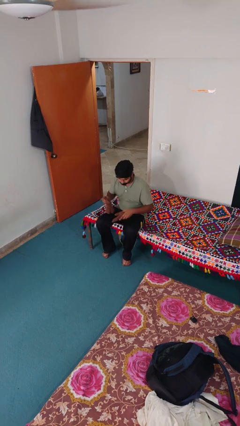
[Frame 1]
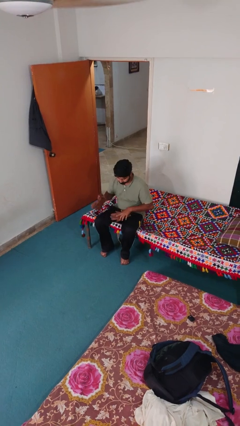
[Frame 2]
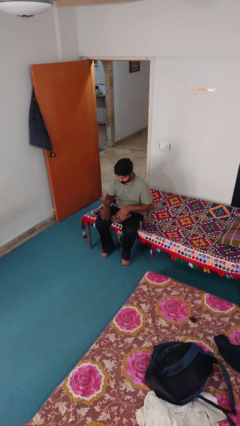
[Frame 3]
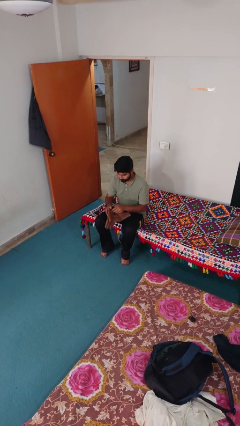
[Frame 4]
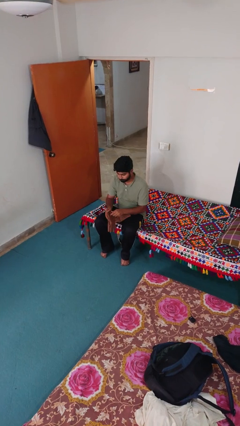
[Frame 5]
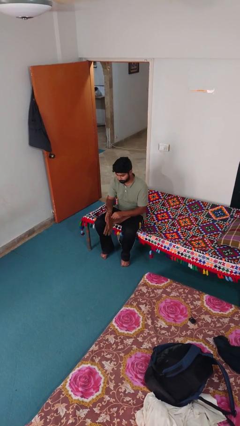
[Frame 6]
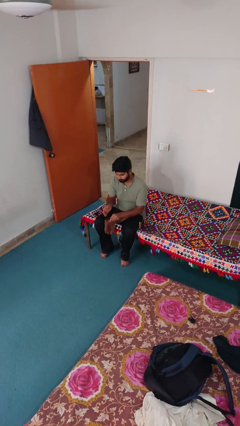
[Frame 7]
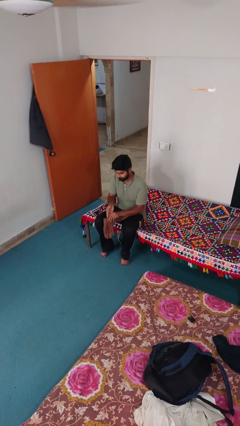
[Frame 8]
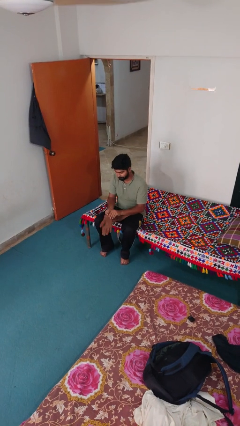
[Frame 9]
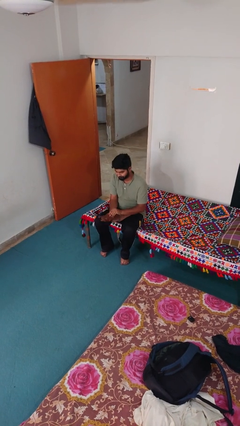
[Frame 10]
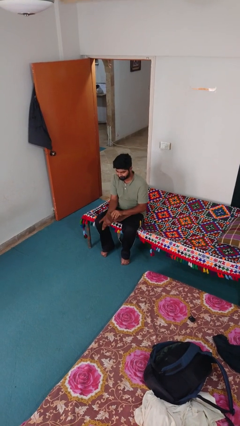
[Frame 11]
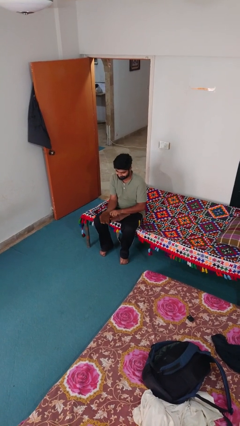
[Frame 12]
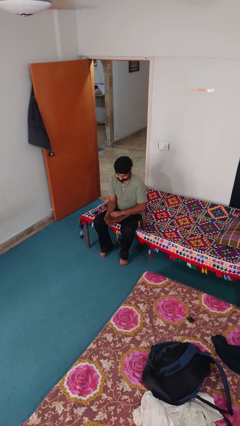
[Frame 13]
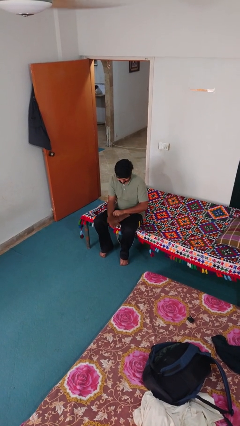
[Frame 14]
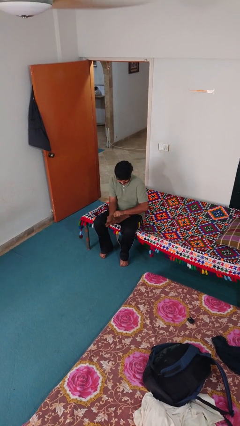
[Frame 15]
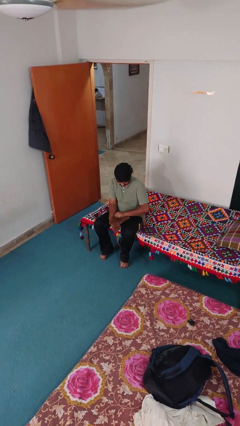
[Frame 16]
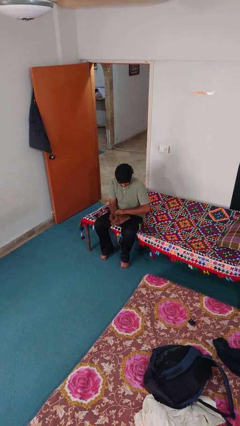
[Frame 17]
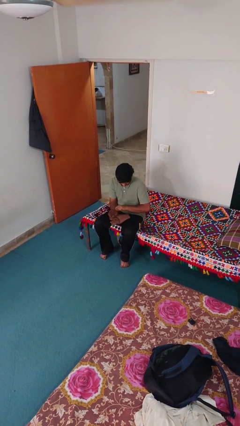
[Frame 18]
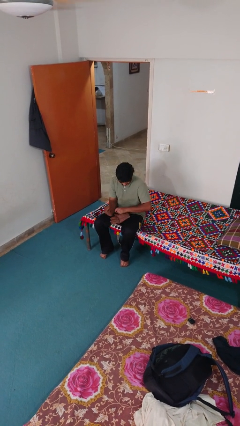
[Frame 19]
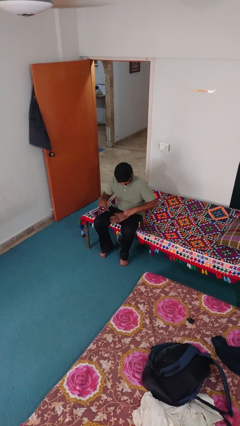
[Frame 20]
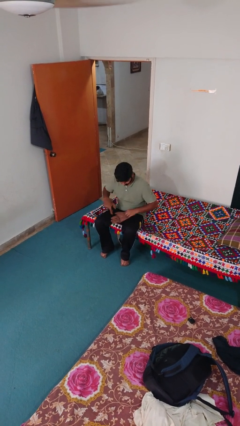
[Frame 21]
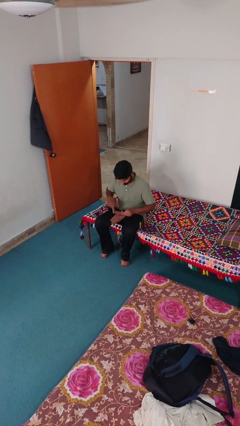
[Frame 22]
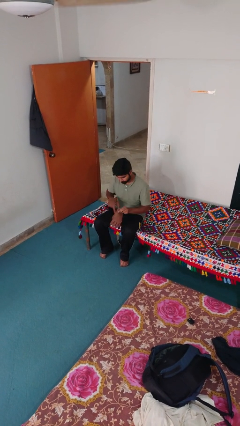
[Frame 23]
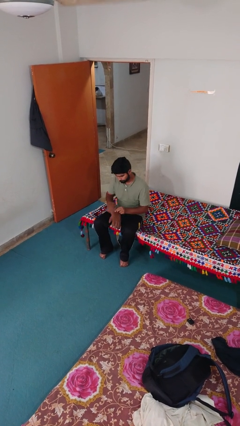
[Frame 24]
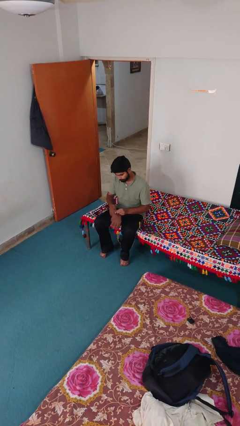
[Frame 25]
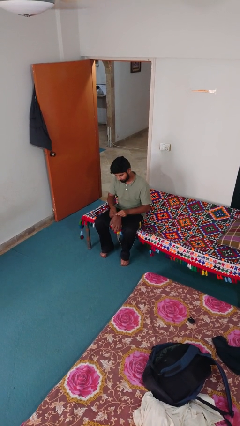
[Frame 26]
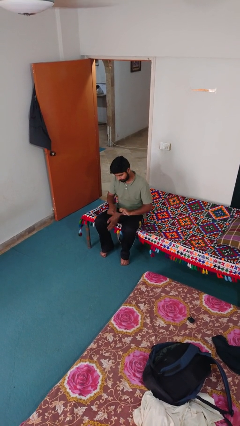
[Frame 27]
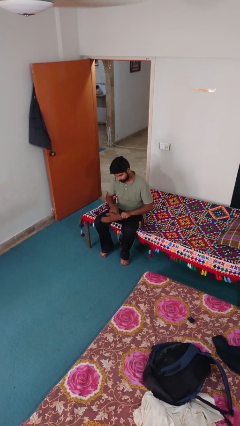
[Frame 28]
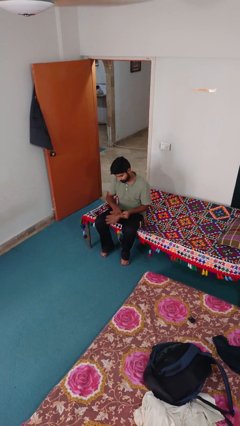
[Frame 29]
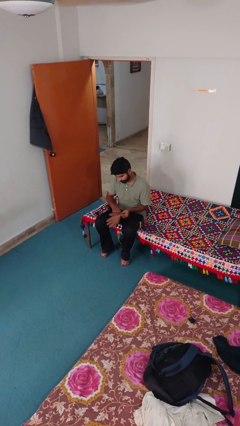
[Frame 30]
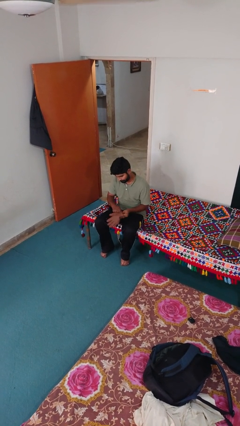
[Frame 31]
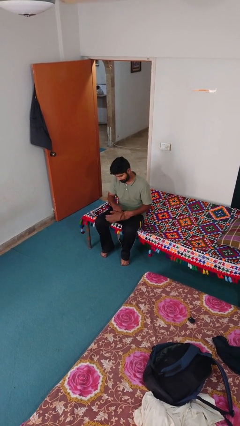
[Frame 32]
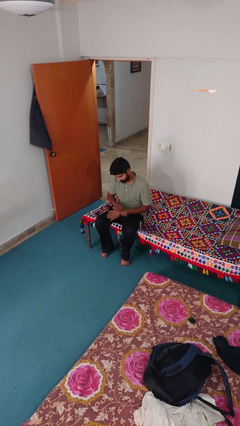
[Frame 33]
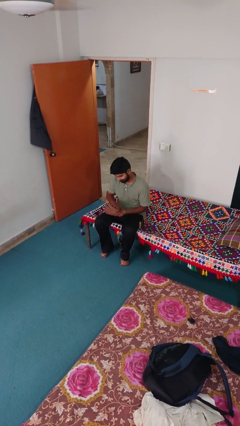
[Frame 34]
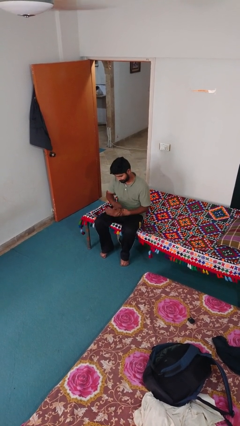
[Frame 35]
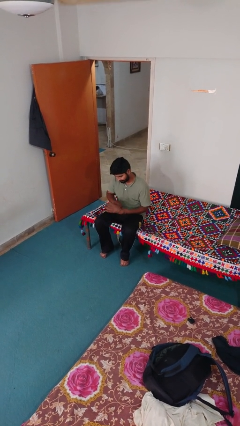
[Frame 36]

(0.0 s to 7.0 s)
person puts on gloves

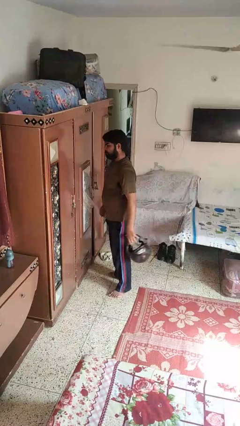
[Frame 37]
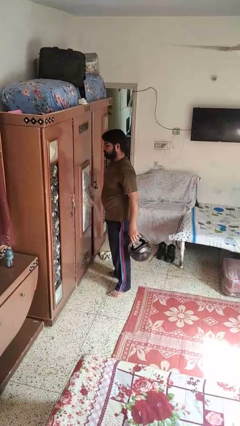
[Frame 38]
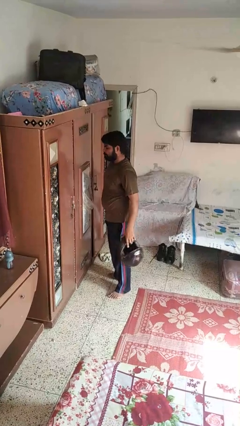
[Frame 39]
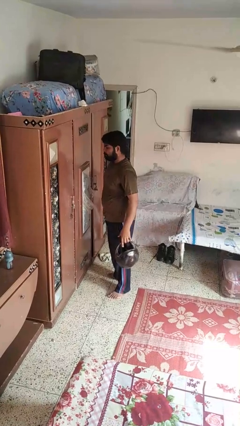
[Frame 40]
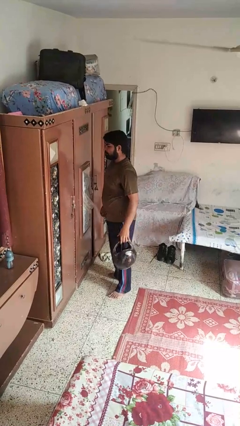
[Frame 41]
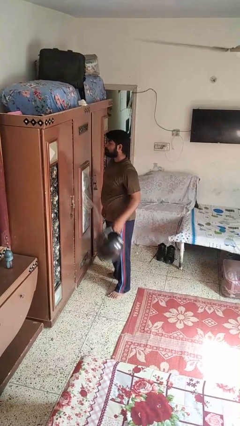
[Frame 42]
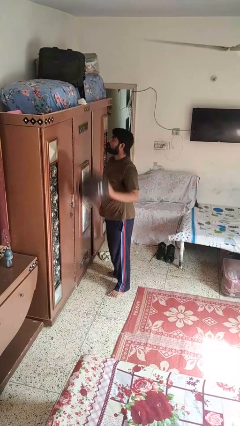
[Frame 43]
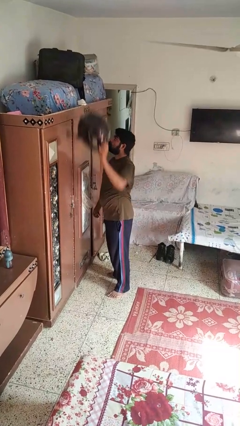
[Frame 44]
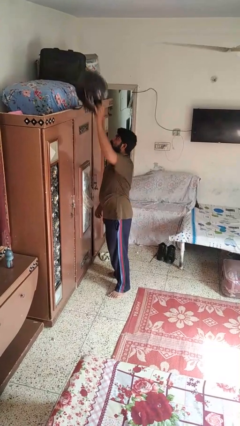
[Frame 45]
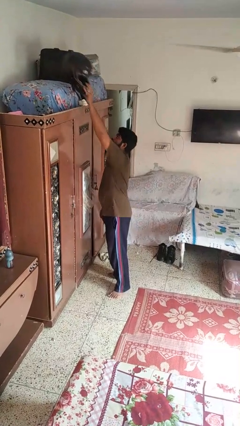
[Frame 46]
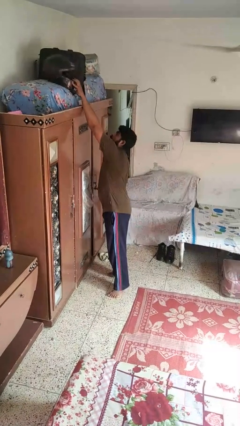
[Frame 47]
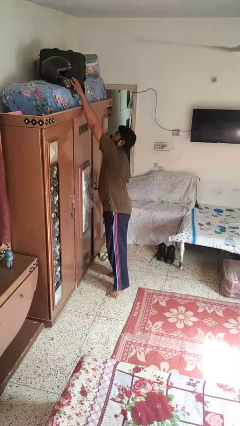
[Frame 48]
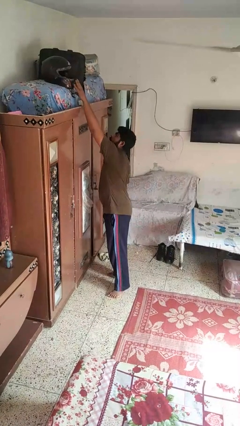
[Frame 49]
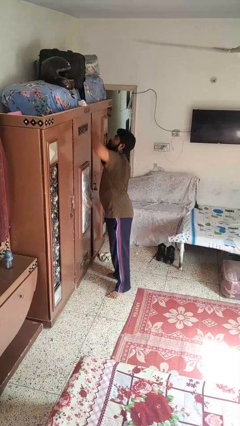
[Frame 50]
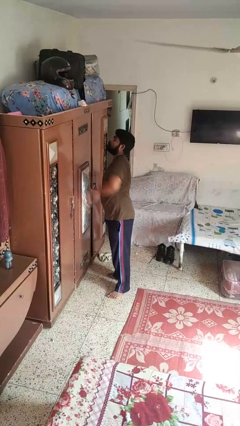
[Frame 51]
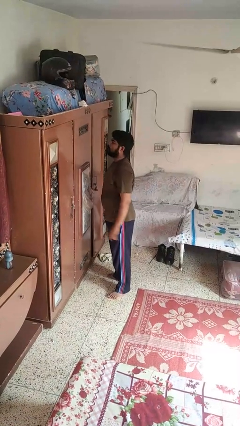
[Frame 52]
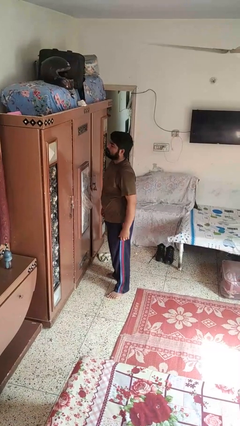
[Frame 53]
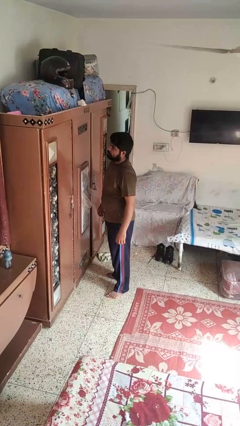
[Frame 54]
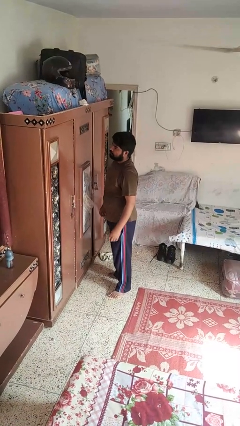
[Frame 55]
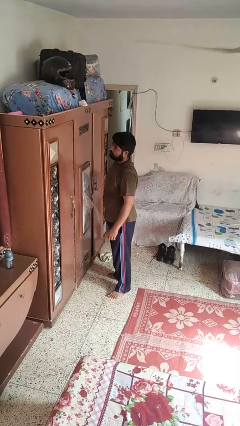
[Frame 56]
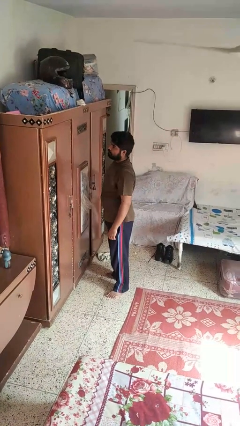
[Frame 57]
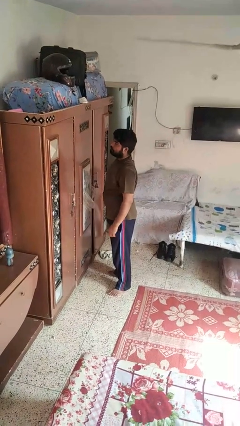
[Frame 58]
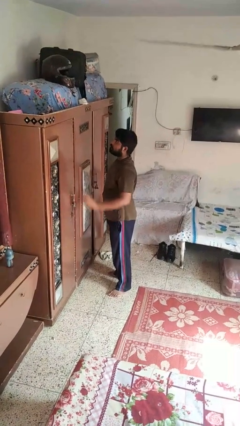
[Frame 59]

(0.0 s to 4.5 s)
person puts down object on shelf

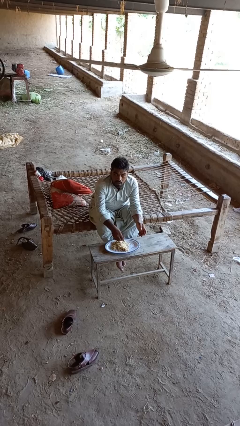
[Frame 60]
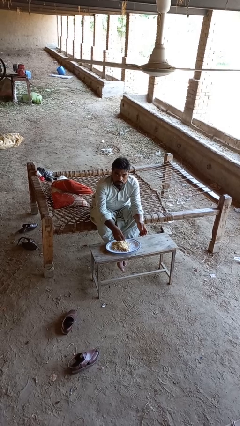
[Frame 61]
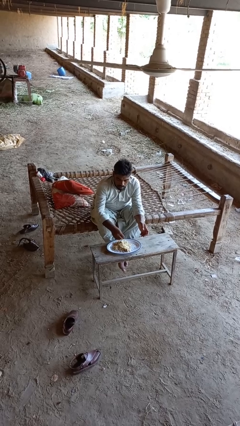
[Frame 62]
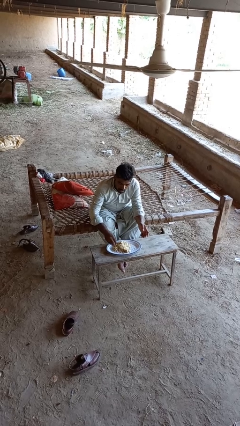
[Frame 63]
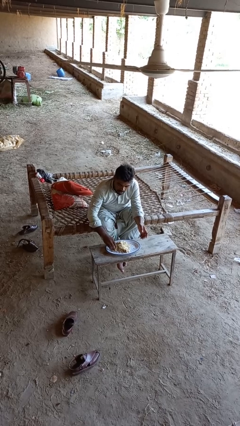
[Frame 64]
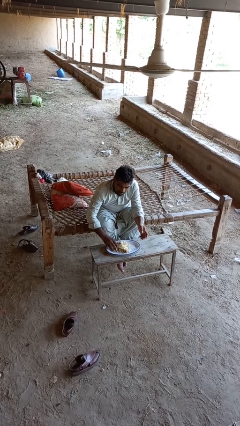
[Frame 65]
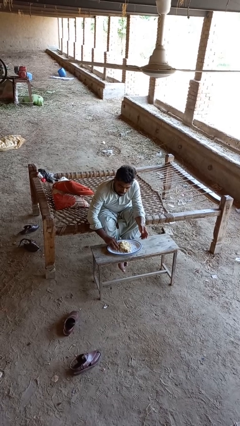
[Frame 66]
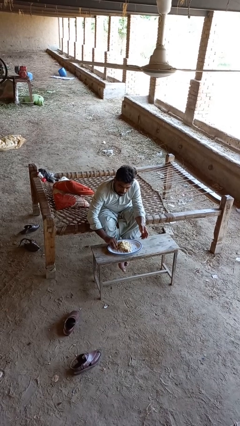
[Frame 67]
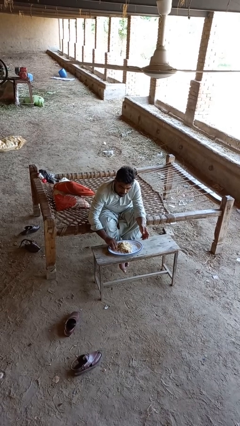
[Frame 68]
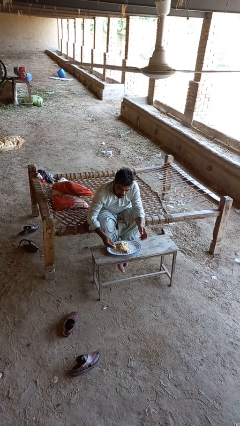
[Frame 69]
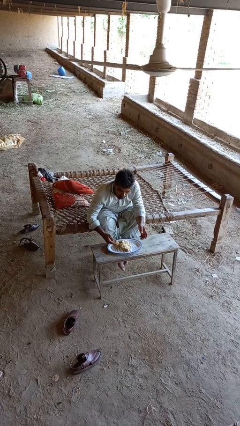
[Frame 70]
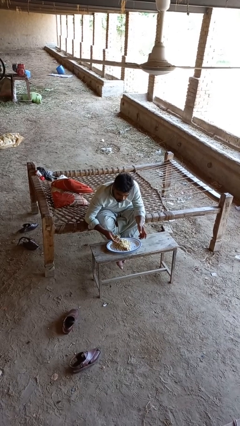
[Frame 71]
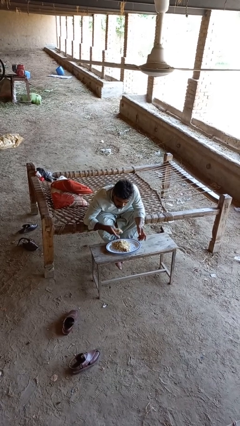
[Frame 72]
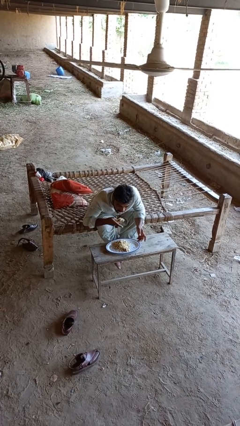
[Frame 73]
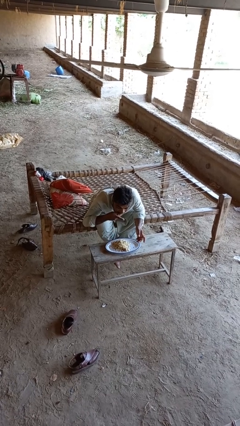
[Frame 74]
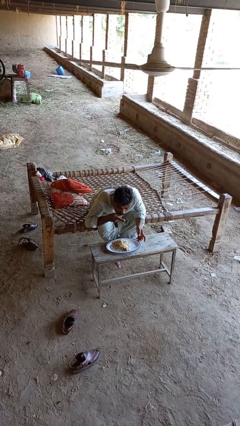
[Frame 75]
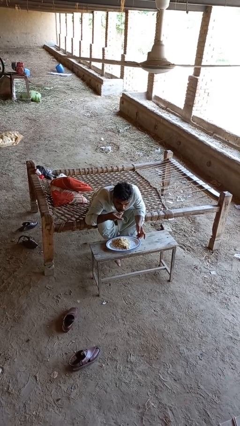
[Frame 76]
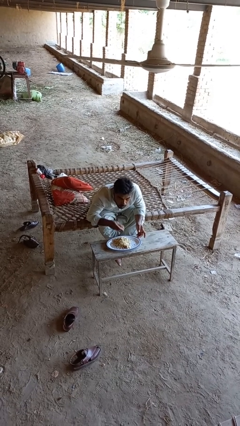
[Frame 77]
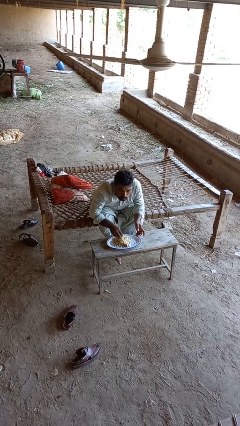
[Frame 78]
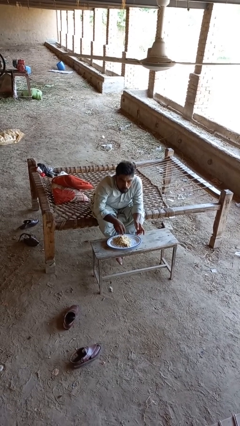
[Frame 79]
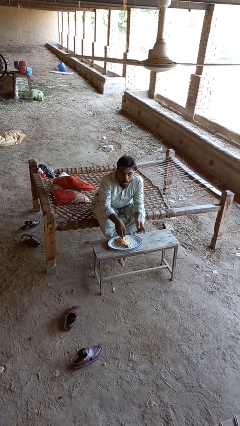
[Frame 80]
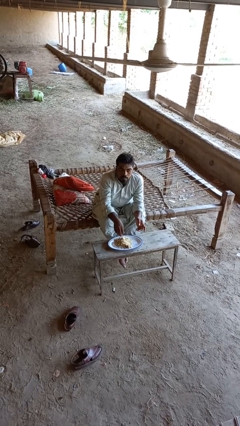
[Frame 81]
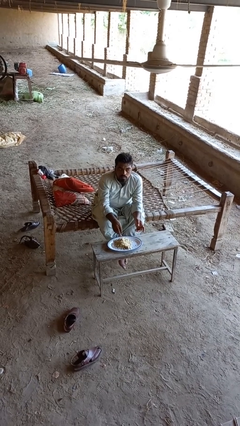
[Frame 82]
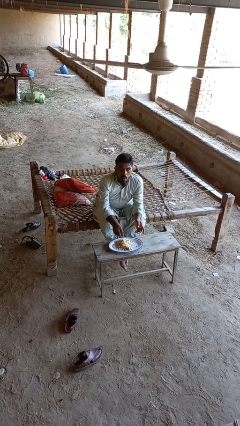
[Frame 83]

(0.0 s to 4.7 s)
person eats with hands

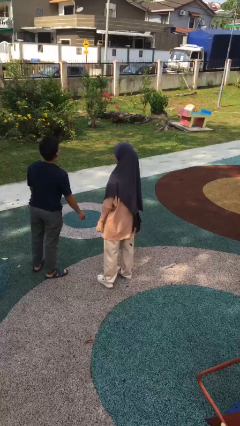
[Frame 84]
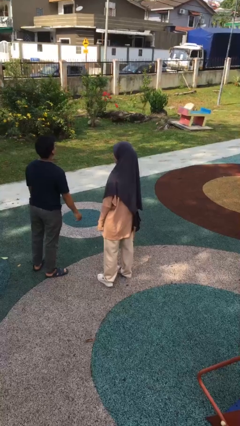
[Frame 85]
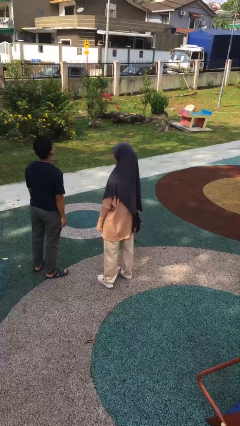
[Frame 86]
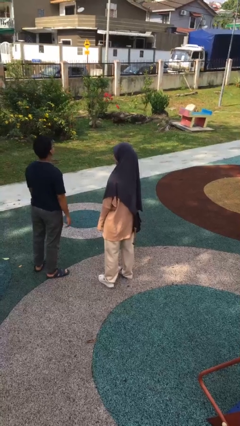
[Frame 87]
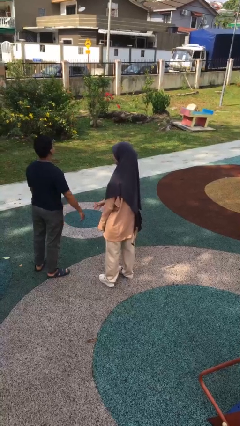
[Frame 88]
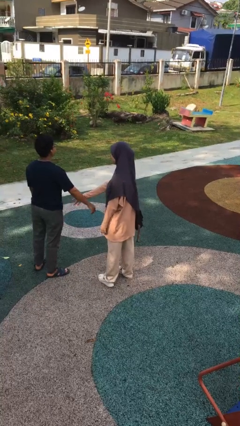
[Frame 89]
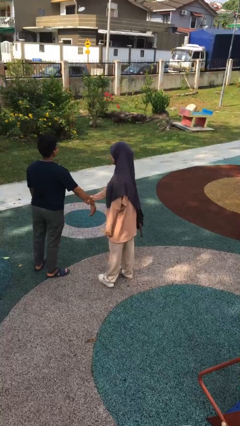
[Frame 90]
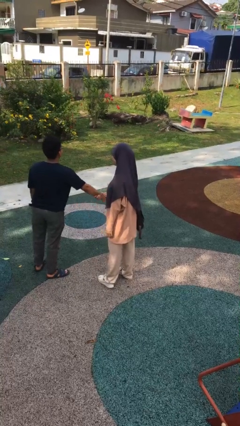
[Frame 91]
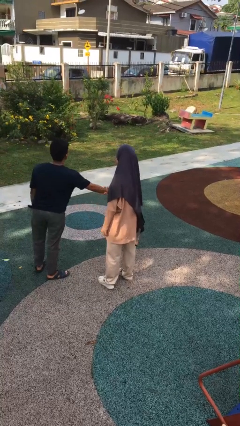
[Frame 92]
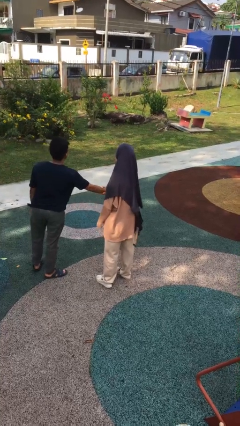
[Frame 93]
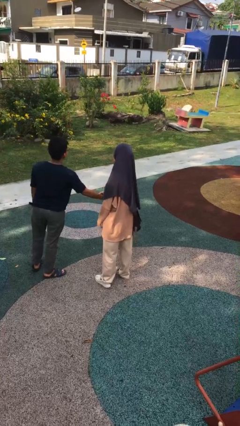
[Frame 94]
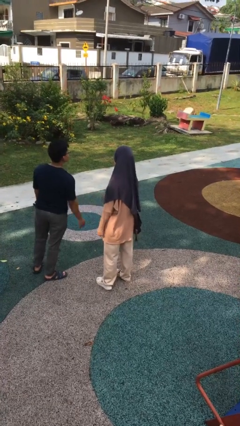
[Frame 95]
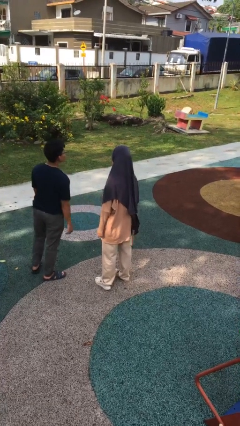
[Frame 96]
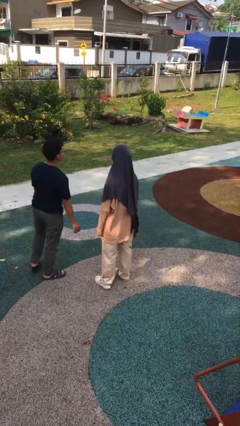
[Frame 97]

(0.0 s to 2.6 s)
person grabs person by forearm
